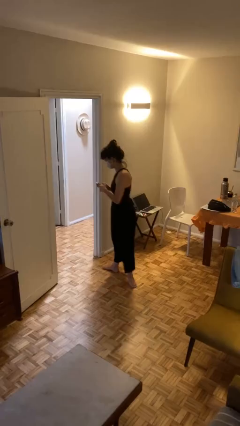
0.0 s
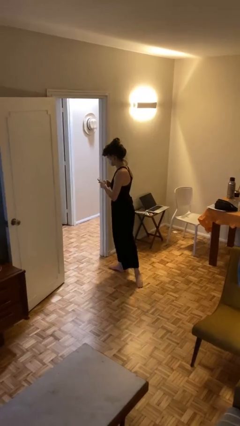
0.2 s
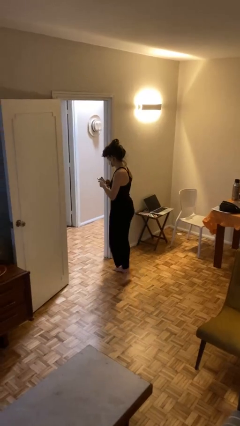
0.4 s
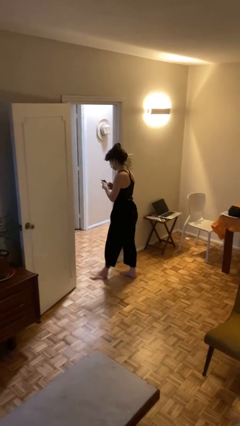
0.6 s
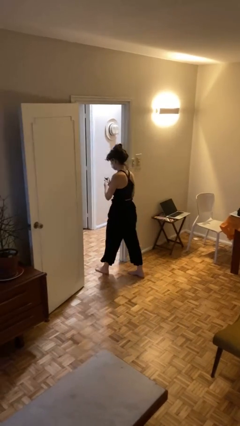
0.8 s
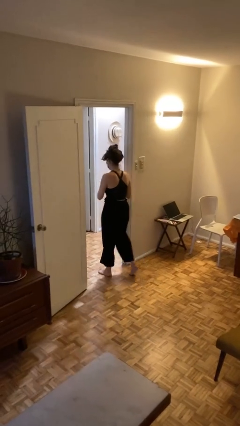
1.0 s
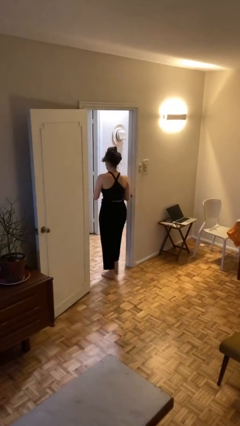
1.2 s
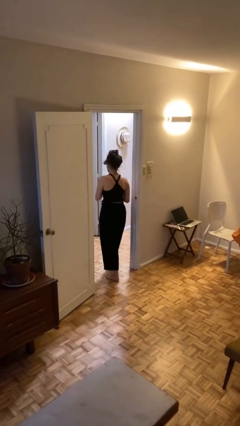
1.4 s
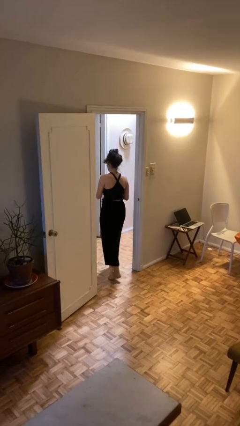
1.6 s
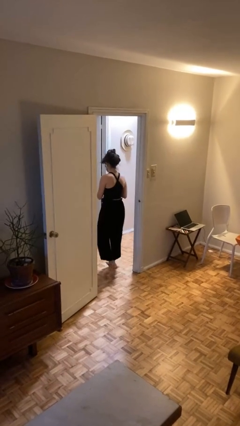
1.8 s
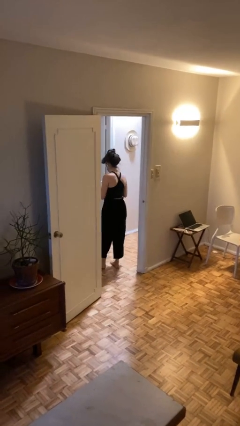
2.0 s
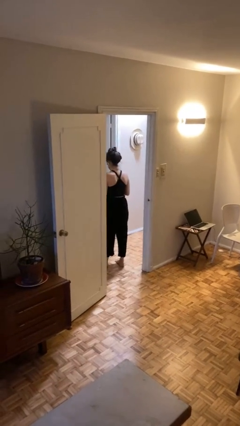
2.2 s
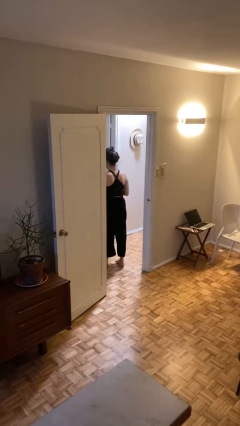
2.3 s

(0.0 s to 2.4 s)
person exits scene through structure

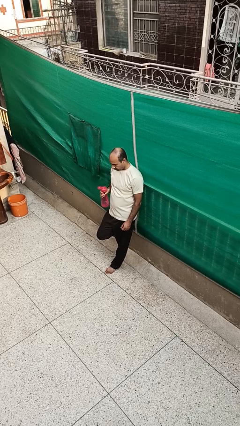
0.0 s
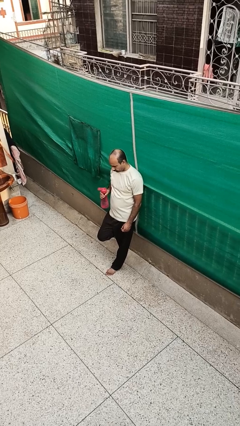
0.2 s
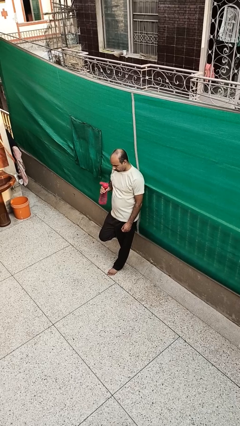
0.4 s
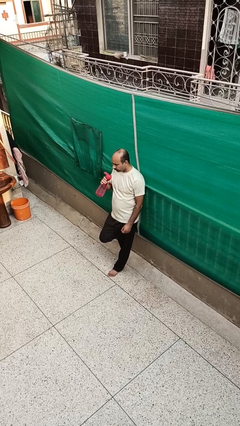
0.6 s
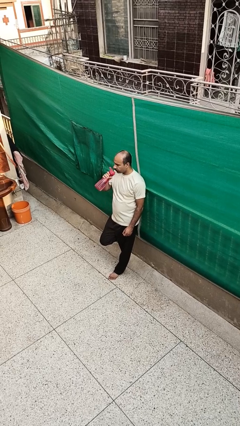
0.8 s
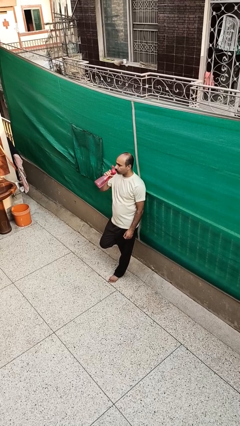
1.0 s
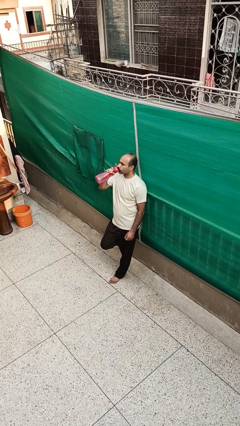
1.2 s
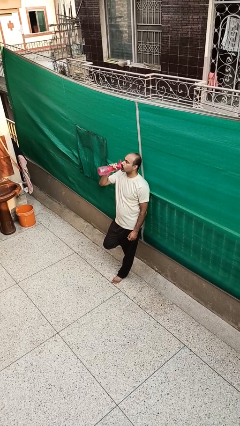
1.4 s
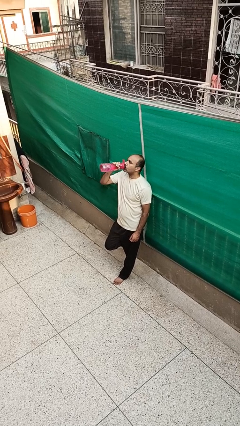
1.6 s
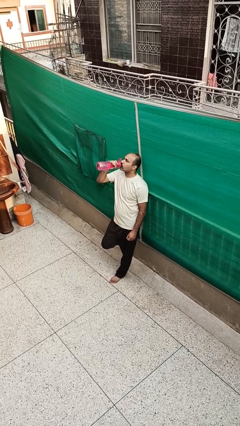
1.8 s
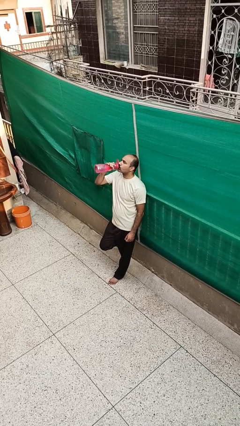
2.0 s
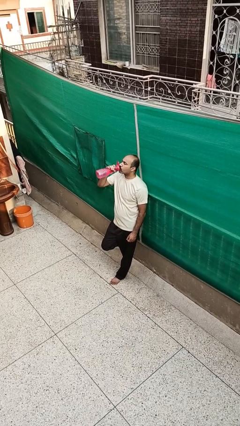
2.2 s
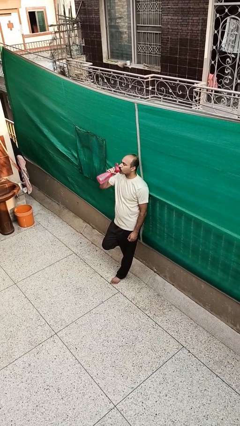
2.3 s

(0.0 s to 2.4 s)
person drinks from bottle

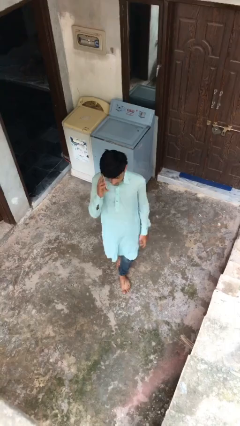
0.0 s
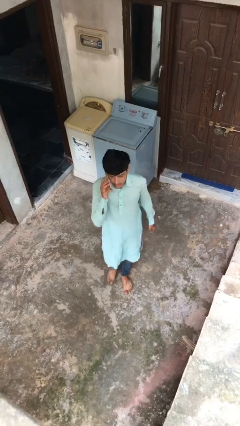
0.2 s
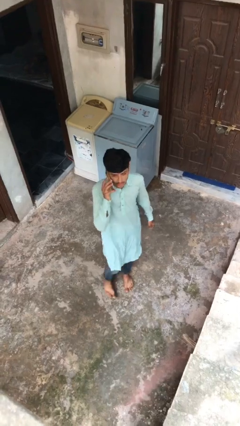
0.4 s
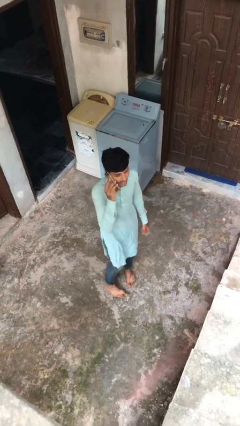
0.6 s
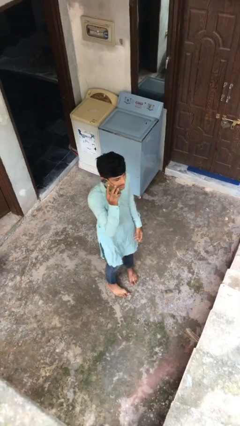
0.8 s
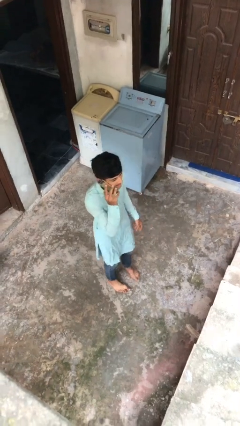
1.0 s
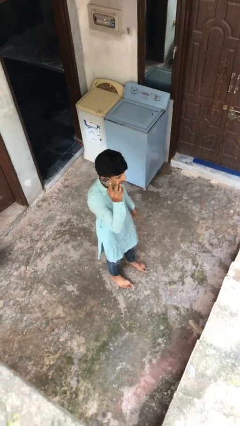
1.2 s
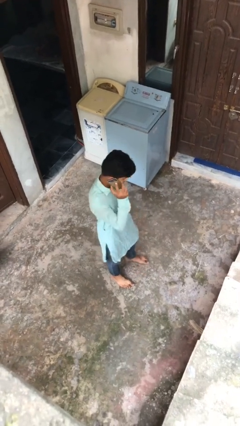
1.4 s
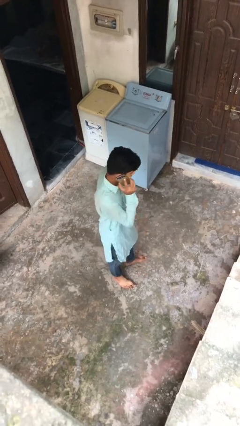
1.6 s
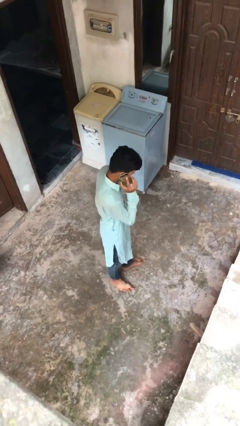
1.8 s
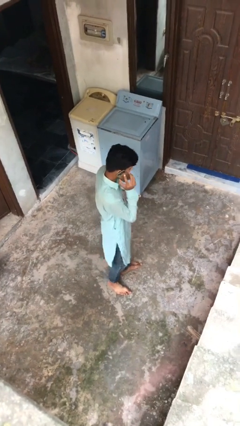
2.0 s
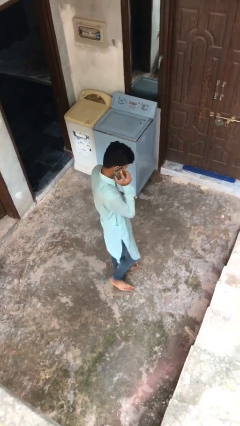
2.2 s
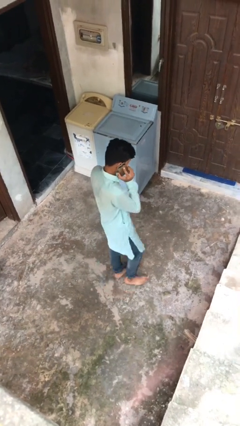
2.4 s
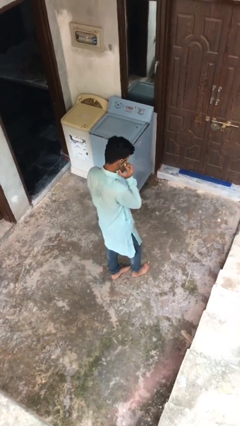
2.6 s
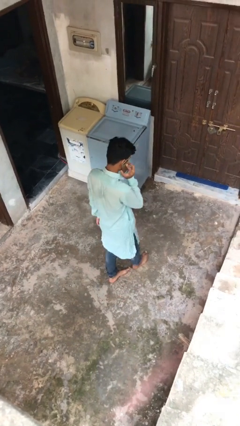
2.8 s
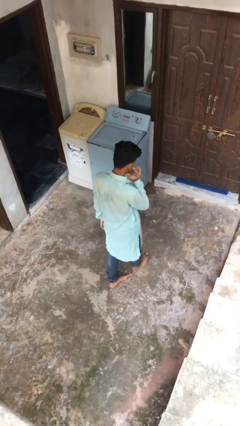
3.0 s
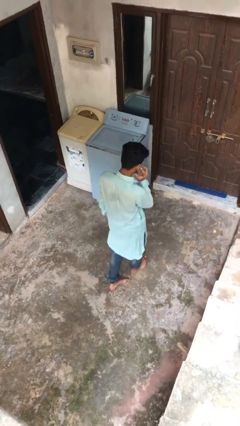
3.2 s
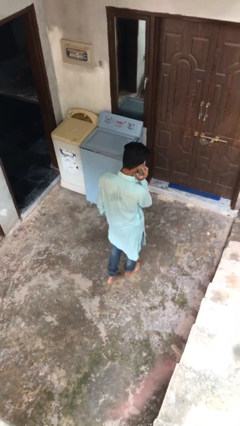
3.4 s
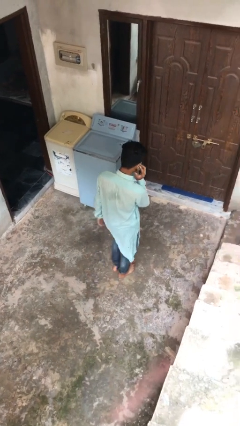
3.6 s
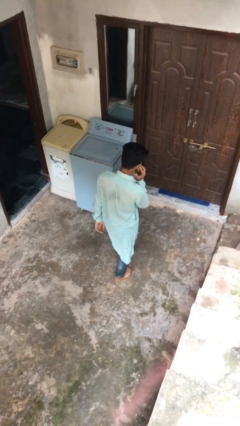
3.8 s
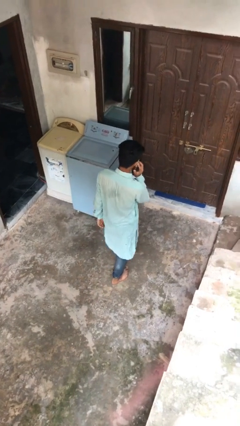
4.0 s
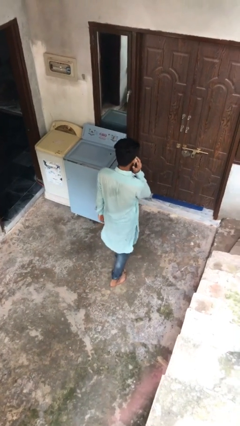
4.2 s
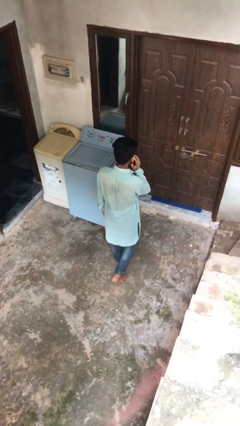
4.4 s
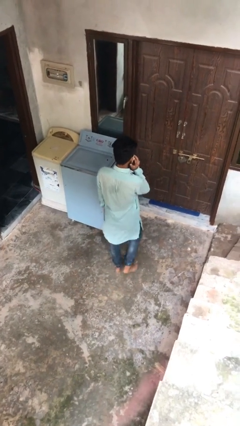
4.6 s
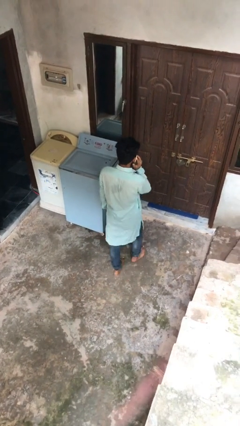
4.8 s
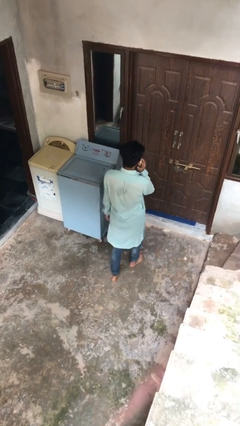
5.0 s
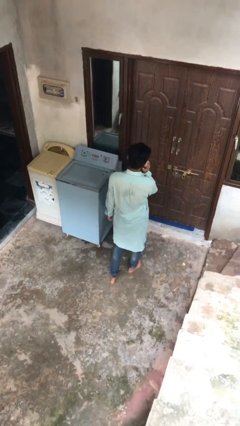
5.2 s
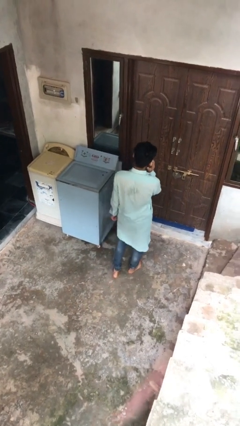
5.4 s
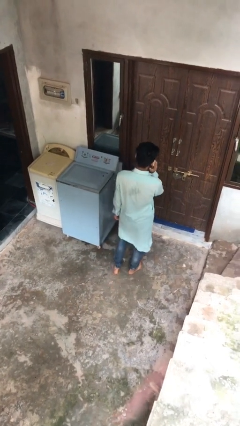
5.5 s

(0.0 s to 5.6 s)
person talks on phone

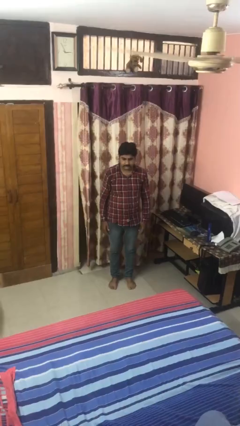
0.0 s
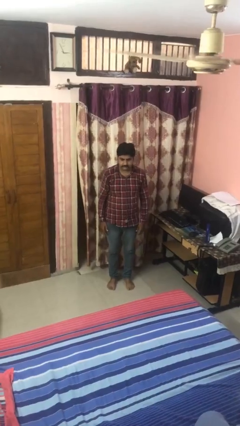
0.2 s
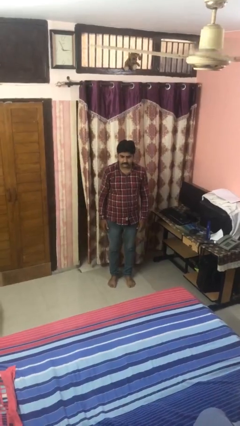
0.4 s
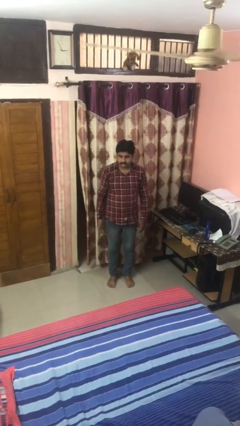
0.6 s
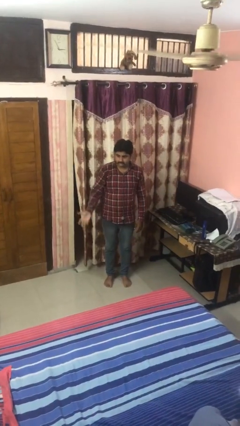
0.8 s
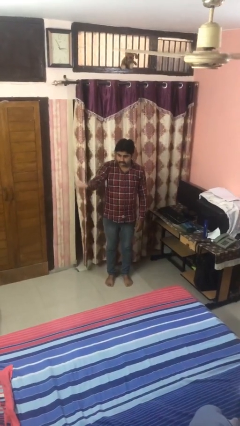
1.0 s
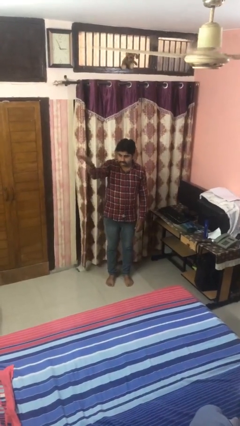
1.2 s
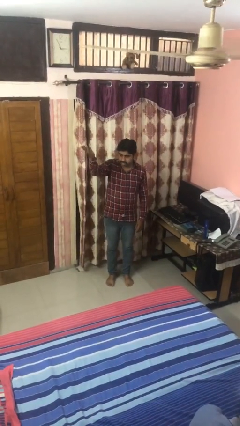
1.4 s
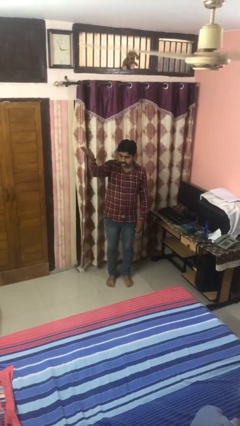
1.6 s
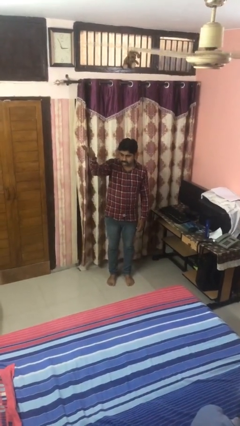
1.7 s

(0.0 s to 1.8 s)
person gestures swipe up

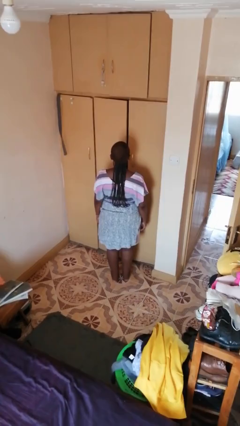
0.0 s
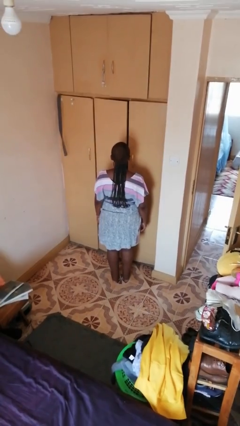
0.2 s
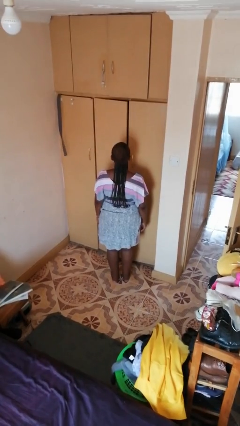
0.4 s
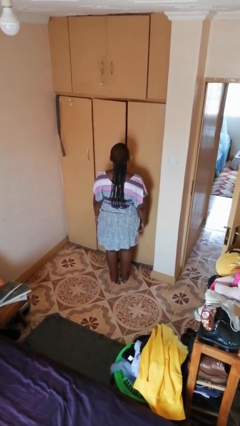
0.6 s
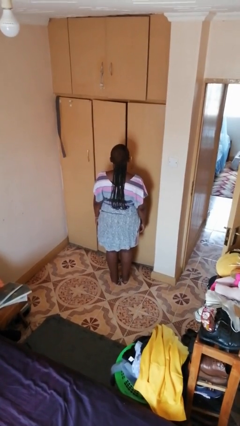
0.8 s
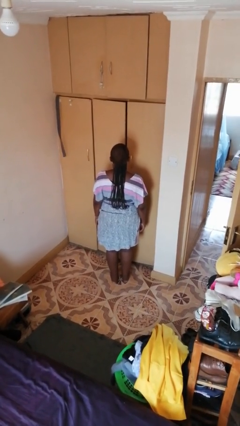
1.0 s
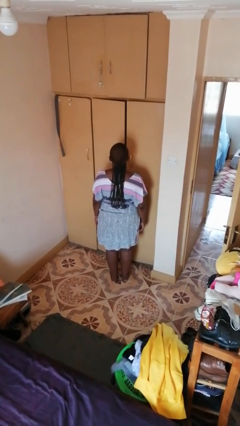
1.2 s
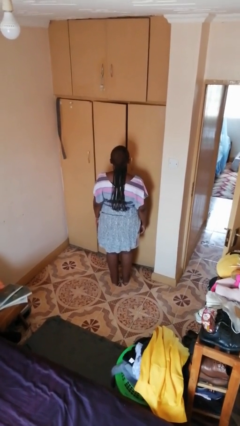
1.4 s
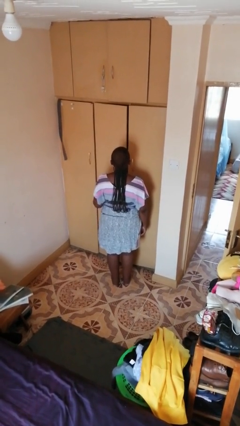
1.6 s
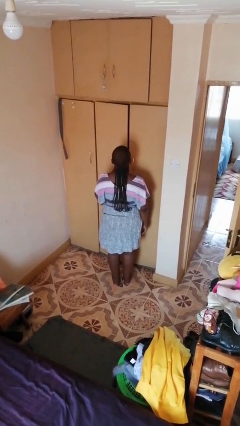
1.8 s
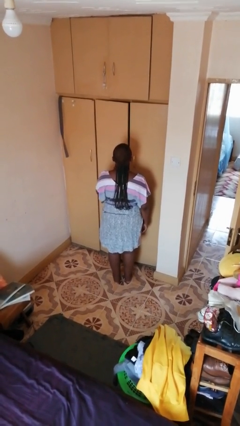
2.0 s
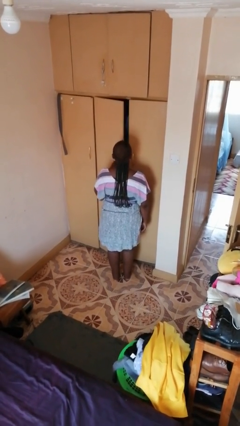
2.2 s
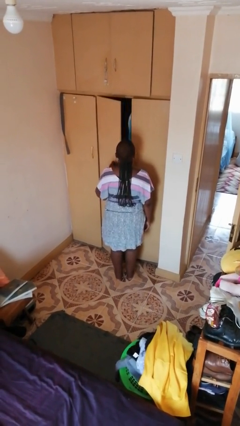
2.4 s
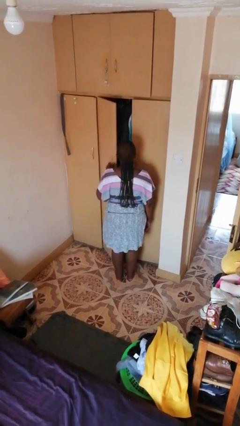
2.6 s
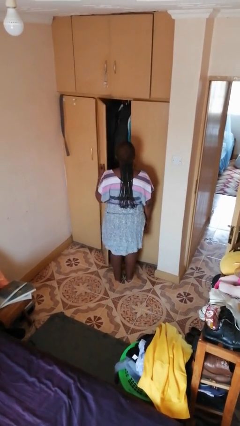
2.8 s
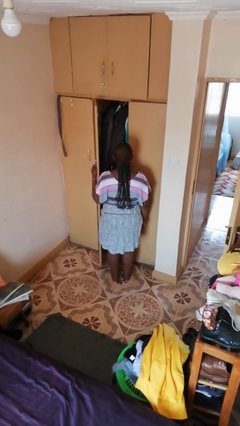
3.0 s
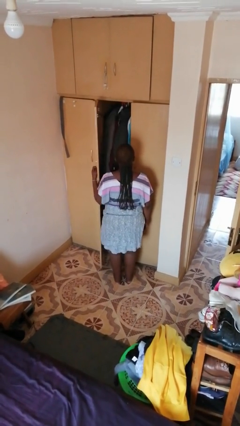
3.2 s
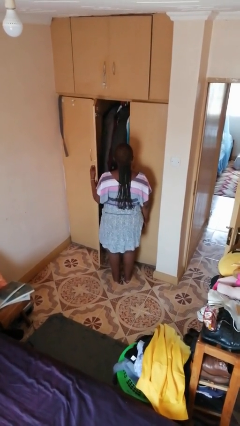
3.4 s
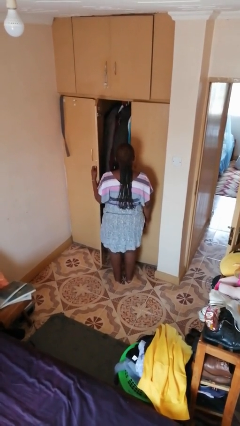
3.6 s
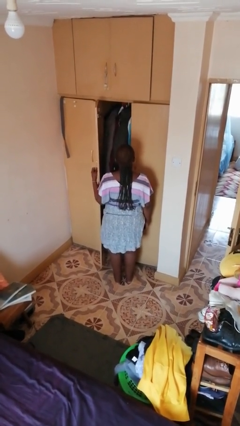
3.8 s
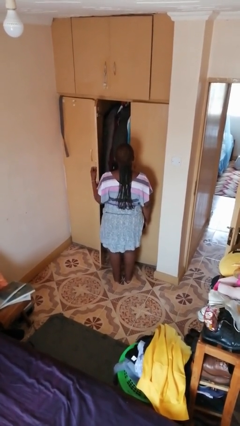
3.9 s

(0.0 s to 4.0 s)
person opens closet door

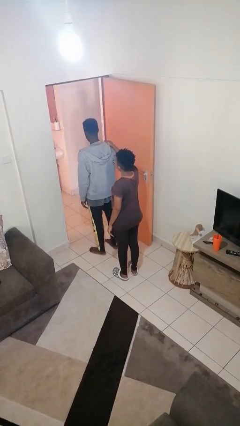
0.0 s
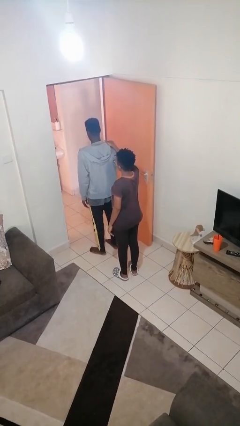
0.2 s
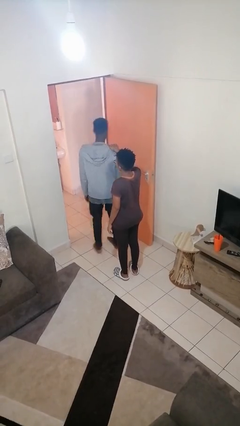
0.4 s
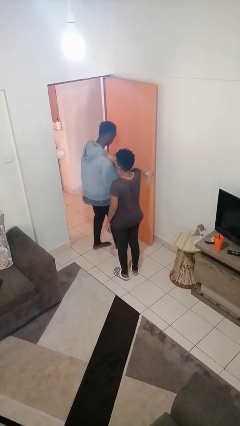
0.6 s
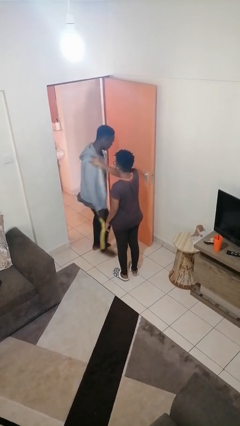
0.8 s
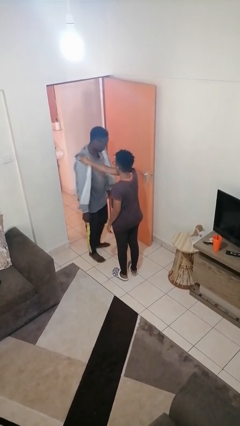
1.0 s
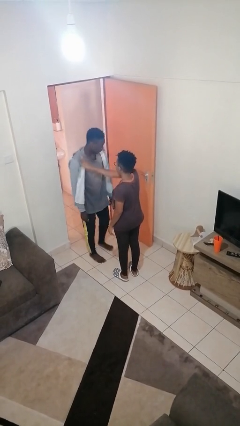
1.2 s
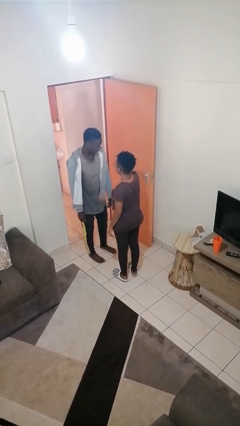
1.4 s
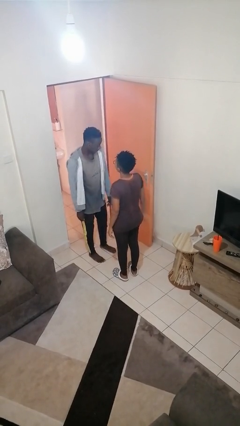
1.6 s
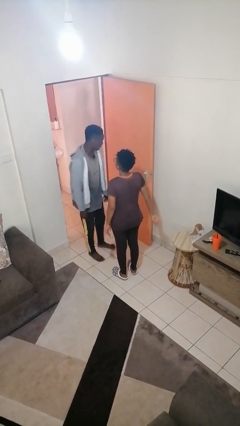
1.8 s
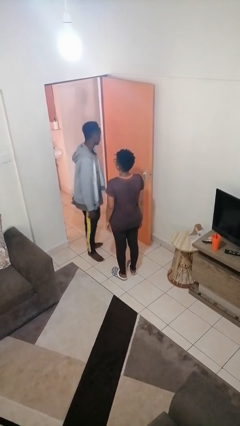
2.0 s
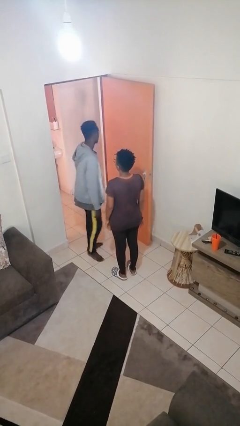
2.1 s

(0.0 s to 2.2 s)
person spins person around
